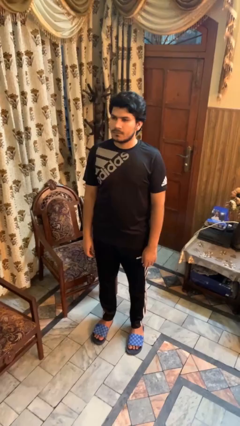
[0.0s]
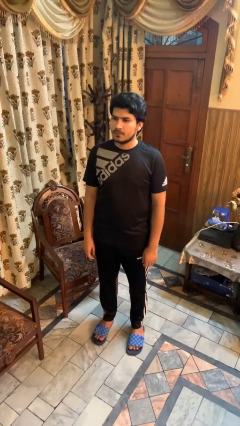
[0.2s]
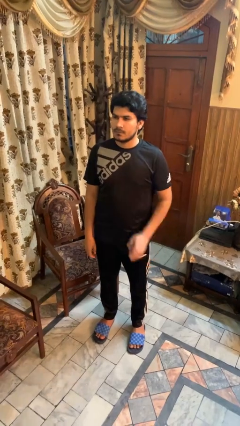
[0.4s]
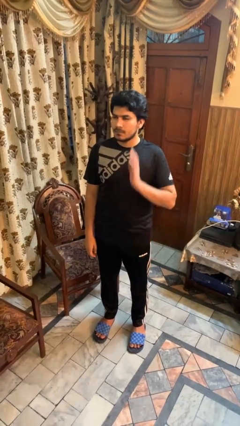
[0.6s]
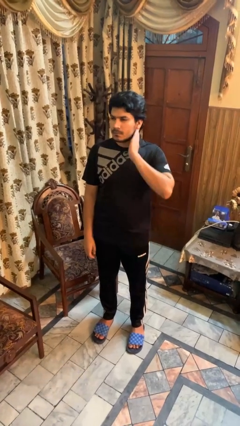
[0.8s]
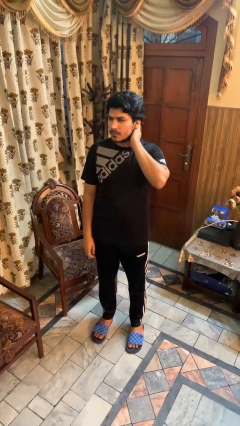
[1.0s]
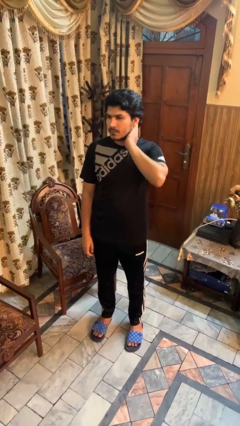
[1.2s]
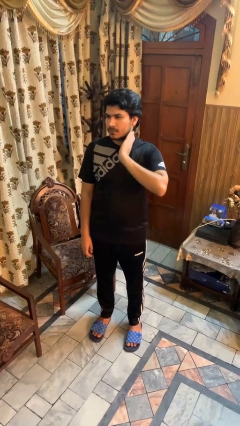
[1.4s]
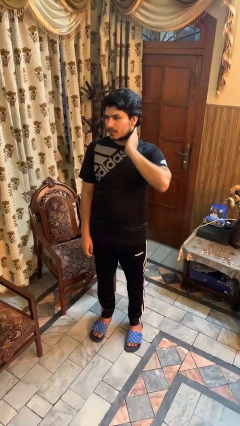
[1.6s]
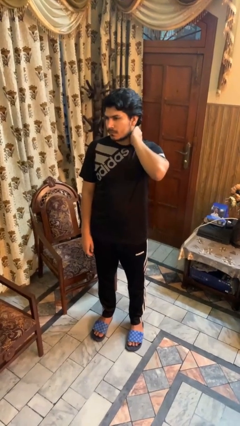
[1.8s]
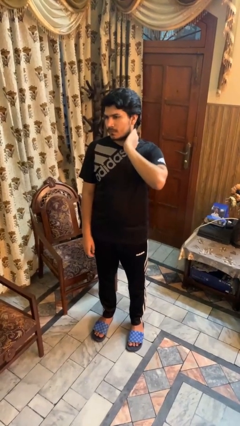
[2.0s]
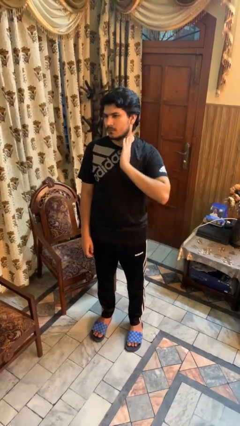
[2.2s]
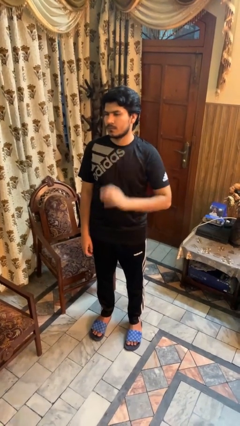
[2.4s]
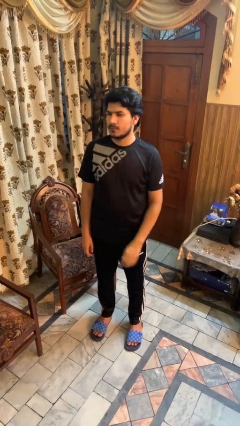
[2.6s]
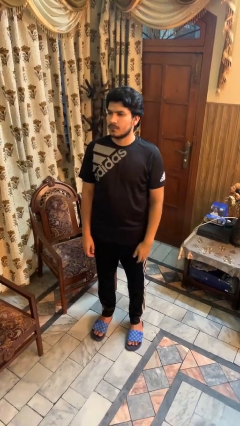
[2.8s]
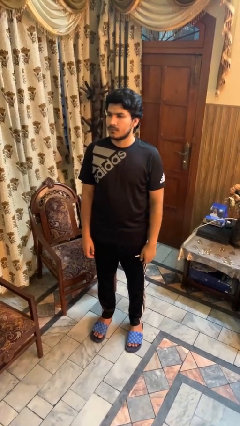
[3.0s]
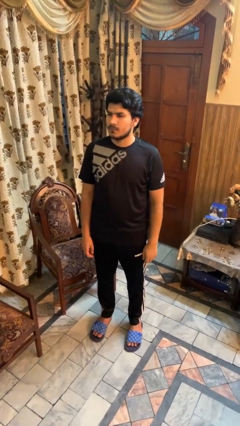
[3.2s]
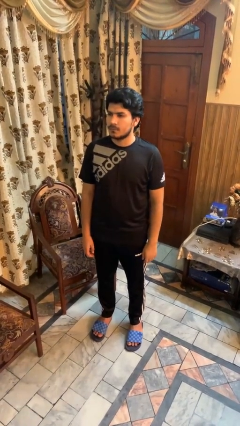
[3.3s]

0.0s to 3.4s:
person rubs neck

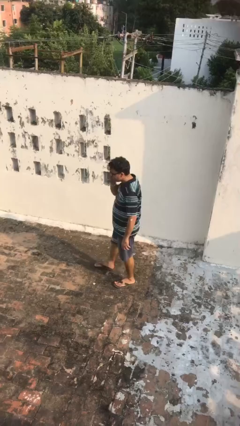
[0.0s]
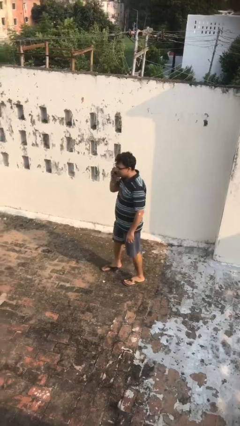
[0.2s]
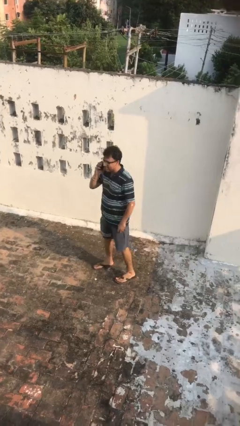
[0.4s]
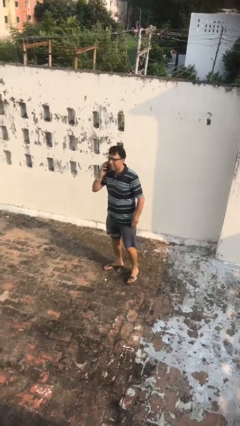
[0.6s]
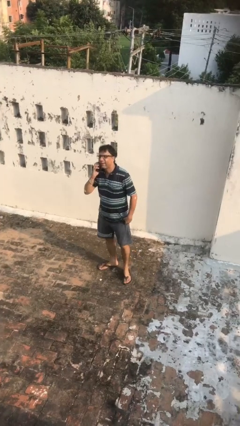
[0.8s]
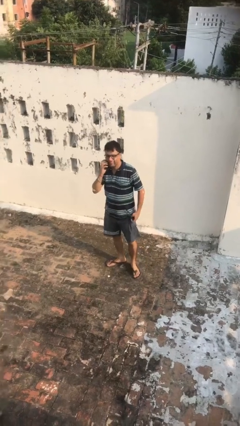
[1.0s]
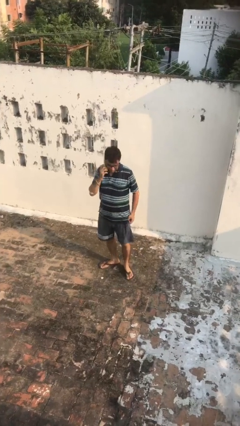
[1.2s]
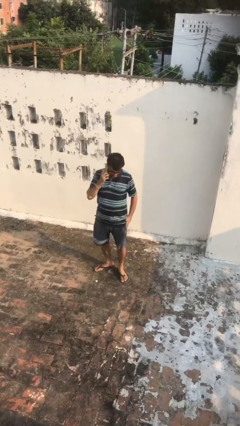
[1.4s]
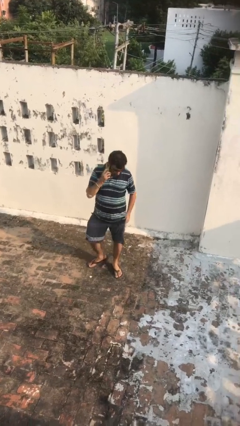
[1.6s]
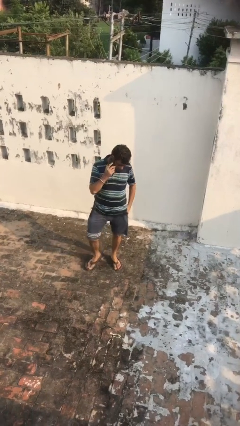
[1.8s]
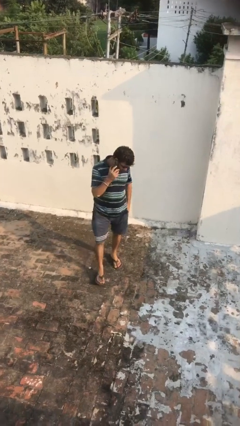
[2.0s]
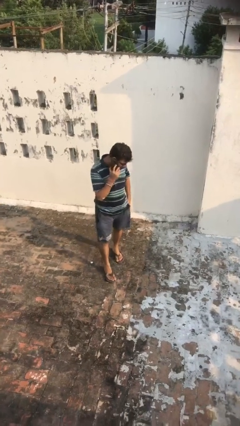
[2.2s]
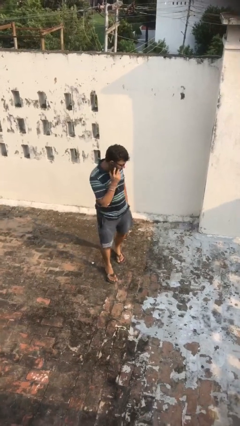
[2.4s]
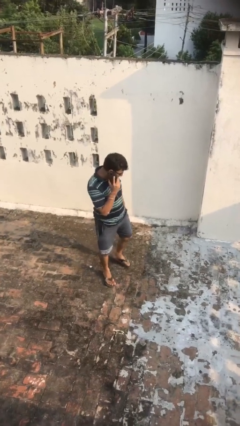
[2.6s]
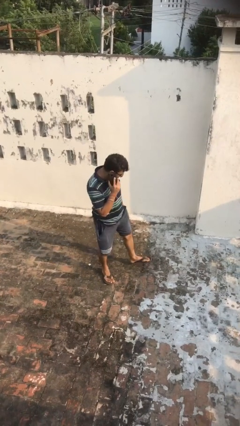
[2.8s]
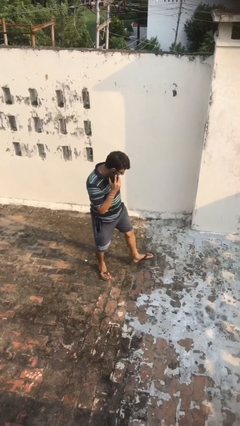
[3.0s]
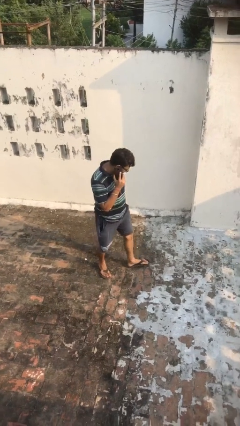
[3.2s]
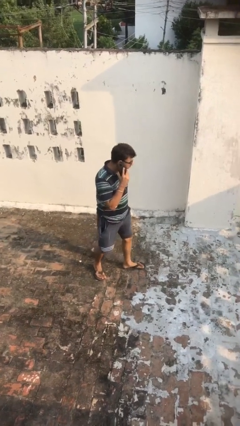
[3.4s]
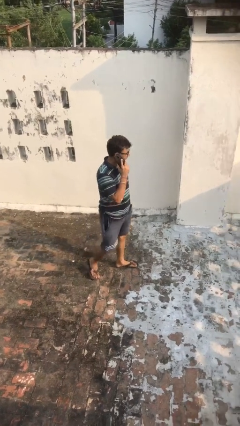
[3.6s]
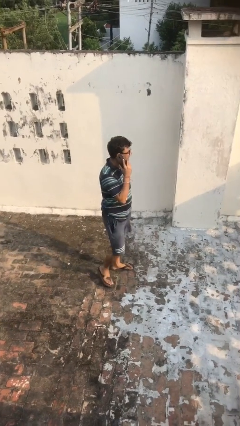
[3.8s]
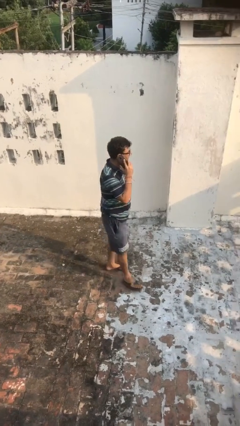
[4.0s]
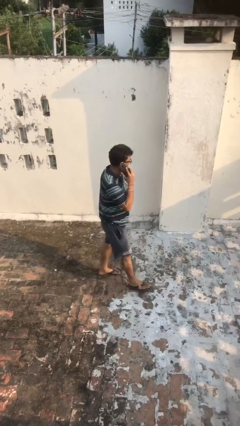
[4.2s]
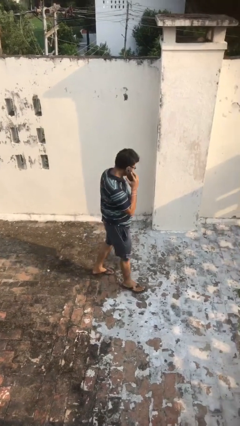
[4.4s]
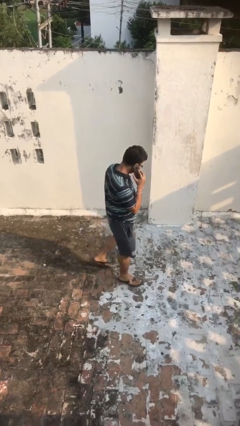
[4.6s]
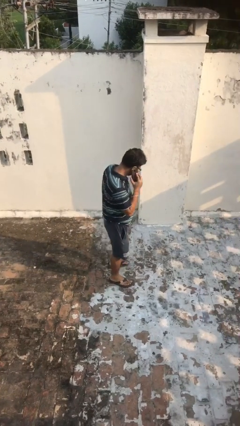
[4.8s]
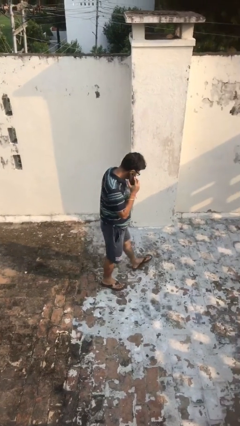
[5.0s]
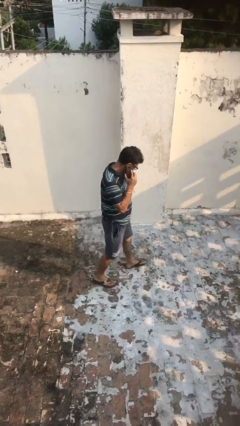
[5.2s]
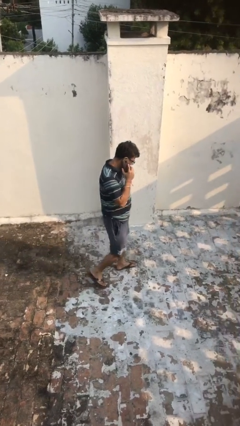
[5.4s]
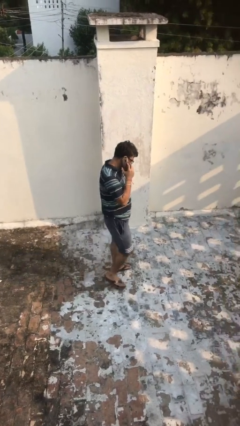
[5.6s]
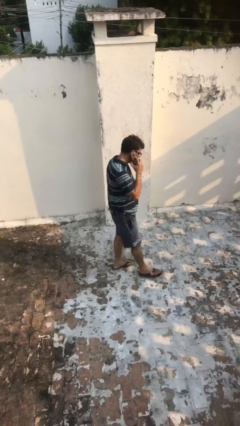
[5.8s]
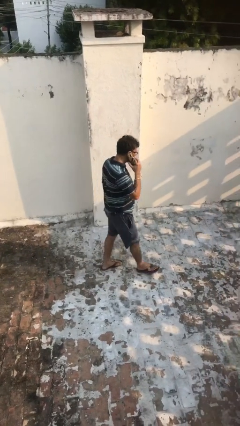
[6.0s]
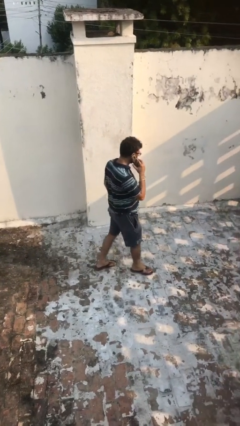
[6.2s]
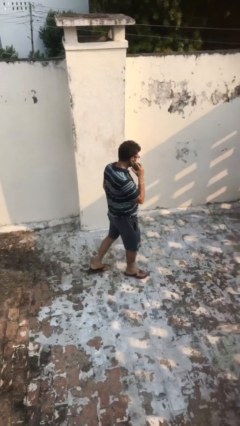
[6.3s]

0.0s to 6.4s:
person talks on phone

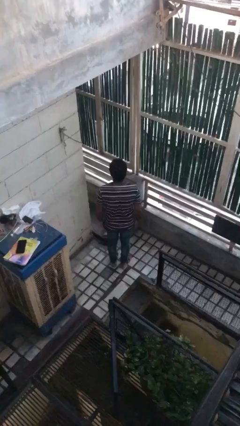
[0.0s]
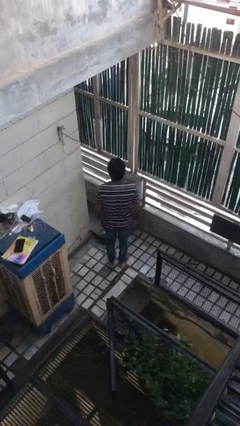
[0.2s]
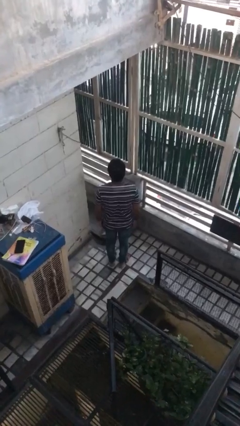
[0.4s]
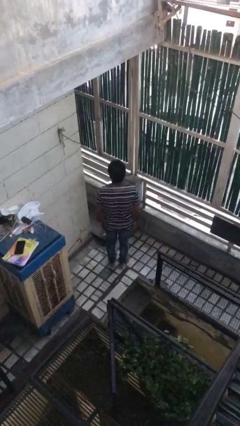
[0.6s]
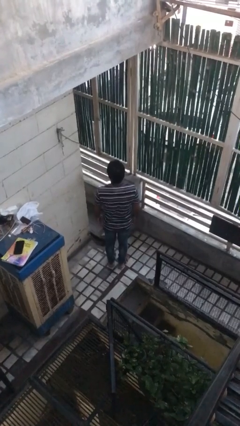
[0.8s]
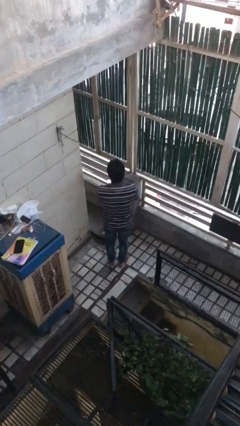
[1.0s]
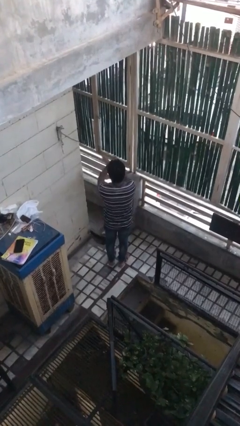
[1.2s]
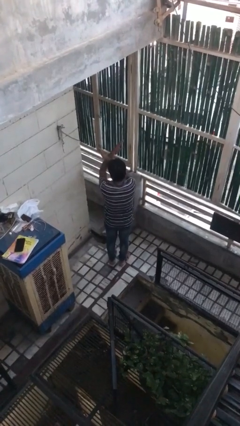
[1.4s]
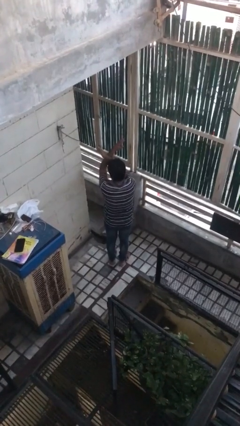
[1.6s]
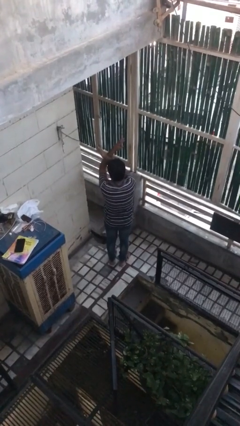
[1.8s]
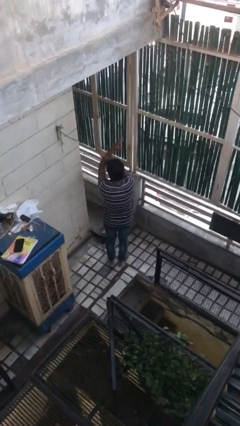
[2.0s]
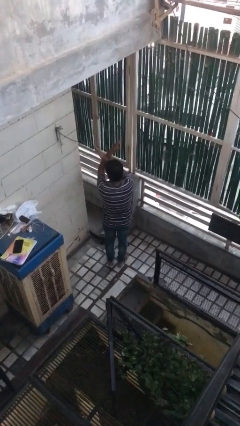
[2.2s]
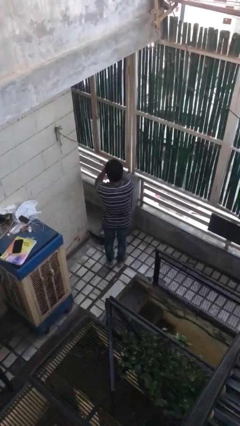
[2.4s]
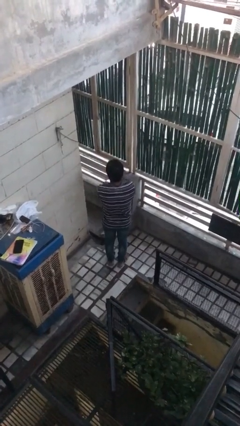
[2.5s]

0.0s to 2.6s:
person gestures arms x

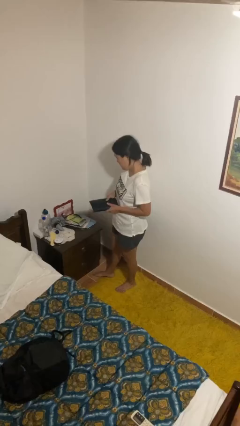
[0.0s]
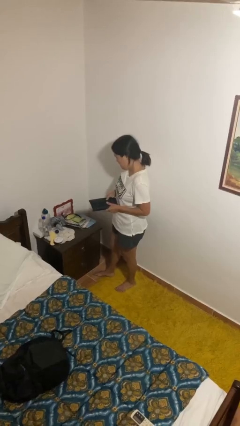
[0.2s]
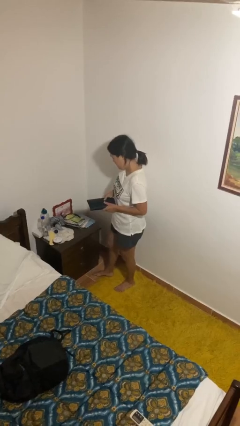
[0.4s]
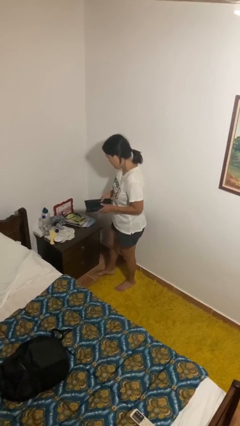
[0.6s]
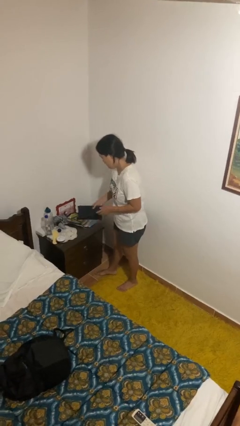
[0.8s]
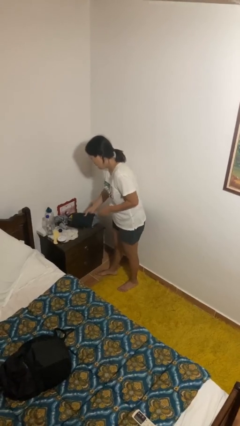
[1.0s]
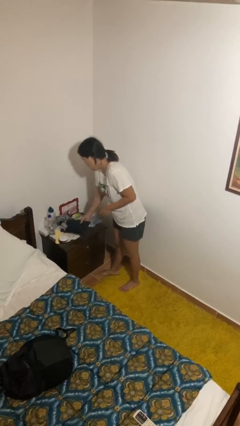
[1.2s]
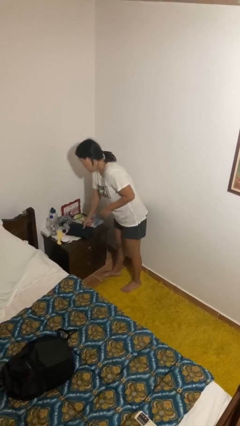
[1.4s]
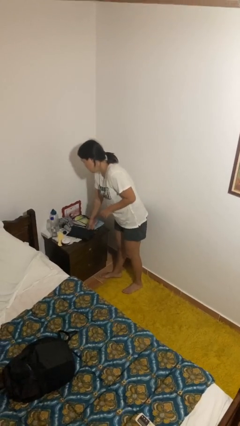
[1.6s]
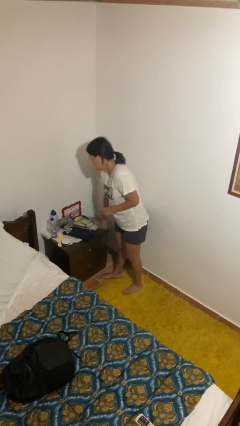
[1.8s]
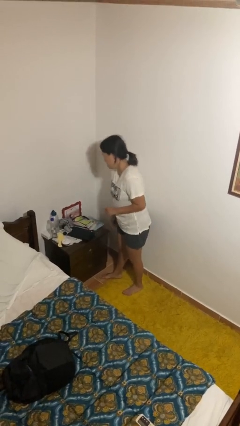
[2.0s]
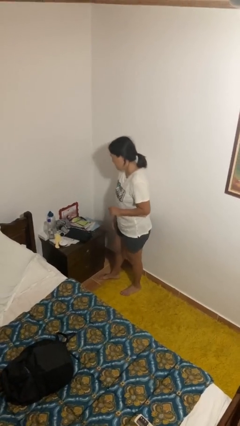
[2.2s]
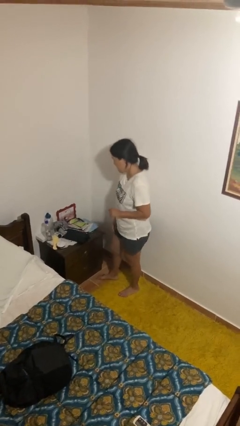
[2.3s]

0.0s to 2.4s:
person puts down object on countertop

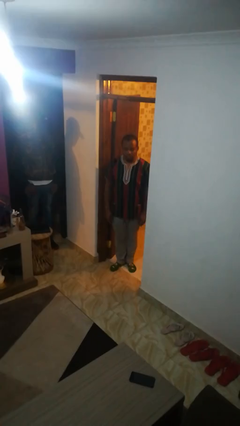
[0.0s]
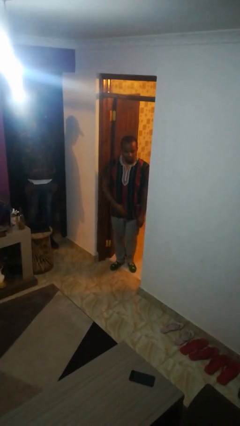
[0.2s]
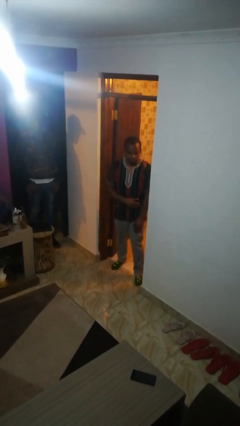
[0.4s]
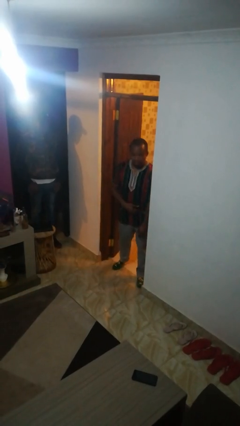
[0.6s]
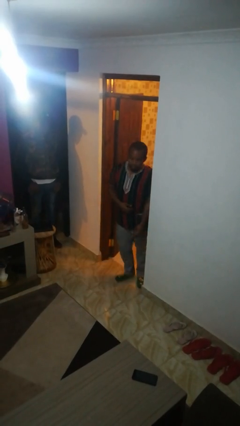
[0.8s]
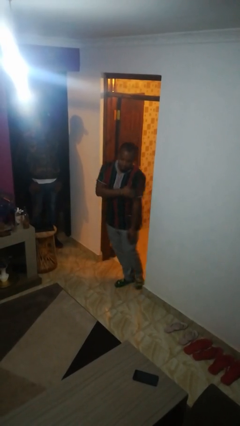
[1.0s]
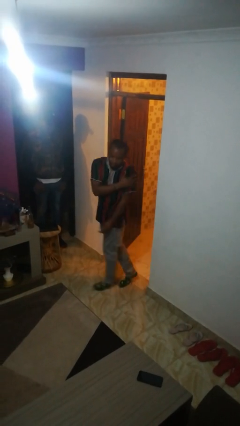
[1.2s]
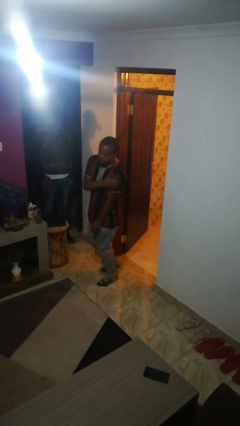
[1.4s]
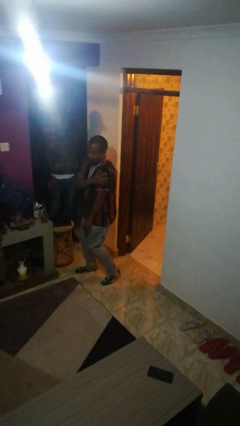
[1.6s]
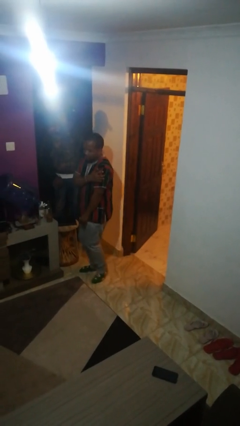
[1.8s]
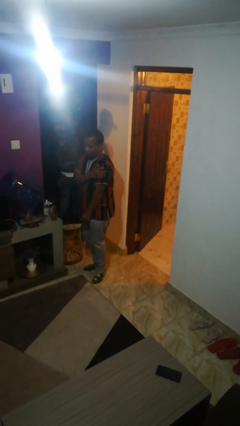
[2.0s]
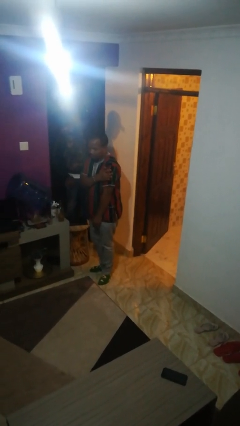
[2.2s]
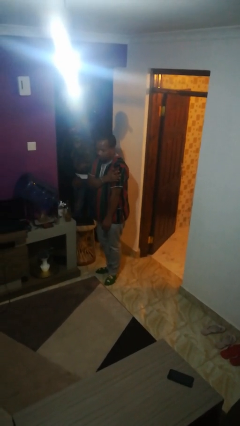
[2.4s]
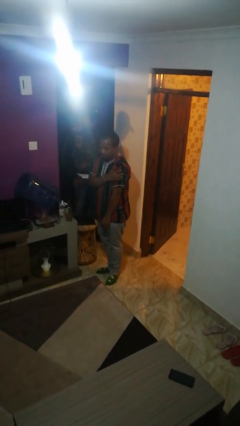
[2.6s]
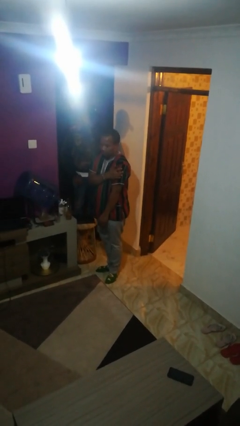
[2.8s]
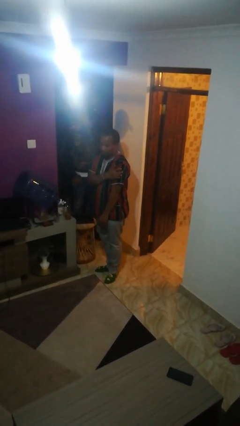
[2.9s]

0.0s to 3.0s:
person bumps into wall
